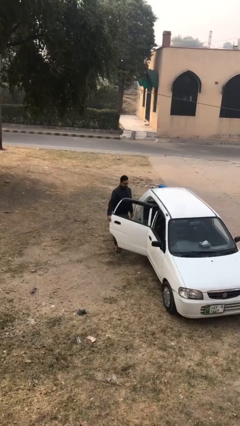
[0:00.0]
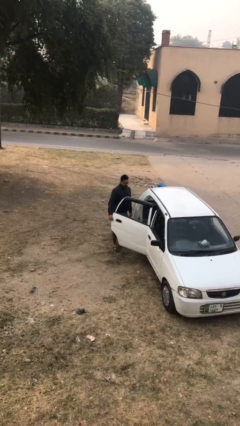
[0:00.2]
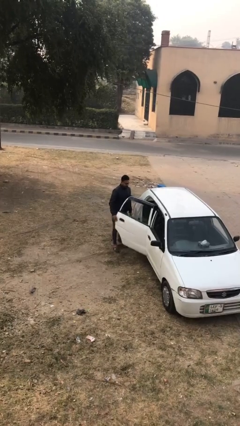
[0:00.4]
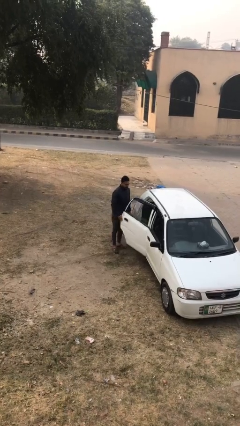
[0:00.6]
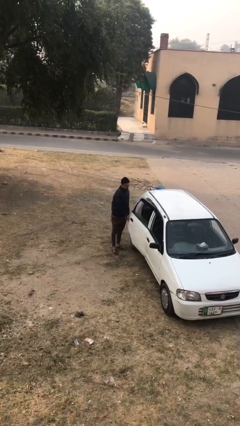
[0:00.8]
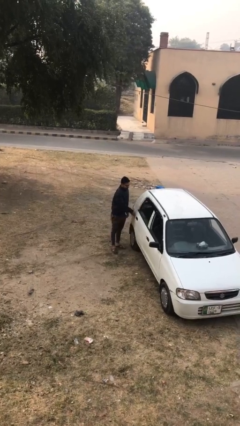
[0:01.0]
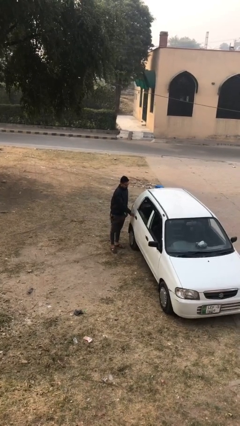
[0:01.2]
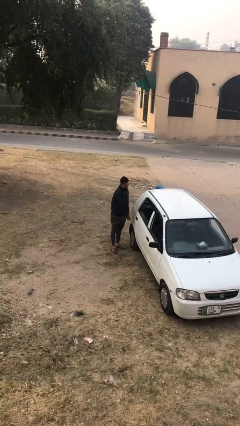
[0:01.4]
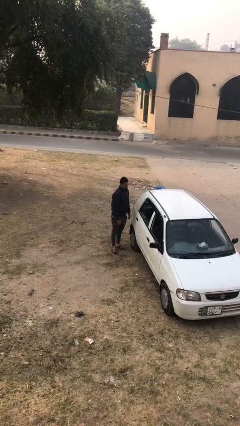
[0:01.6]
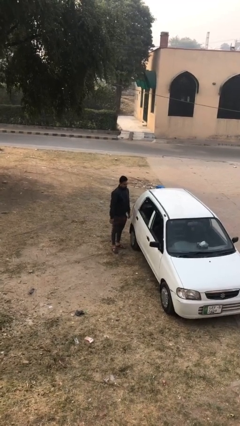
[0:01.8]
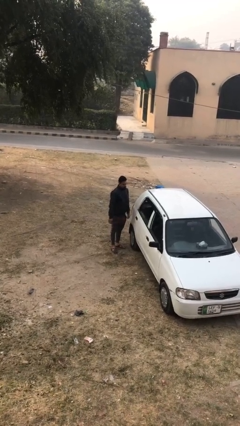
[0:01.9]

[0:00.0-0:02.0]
person closes car door

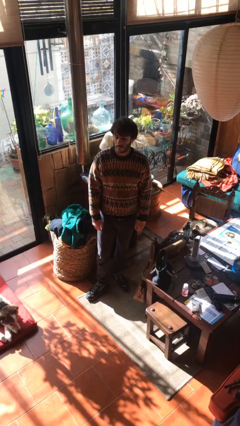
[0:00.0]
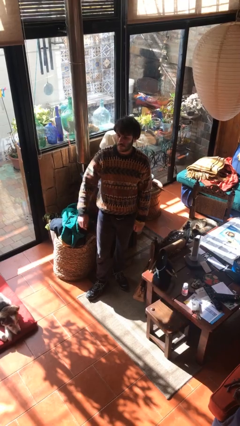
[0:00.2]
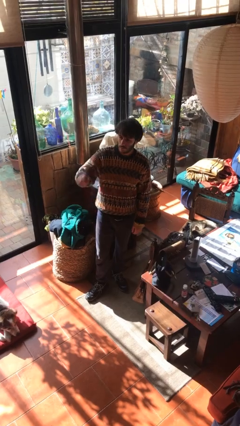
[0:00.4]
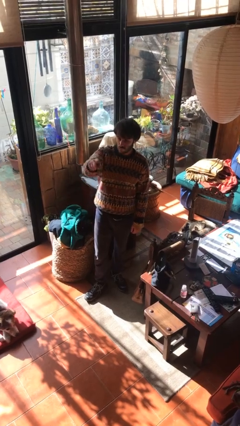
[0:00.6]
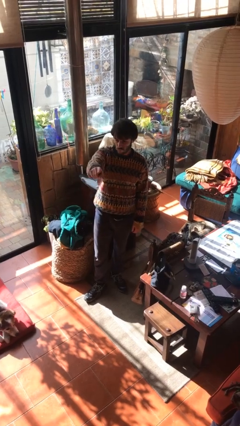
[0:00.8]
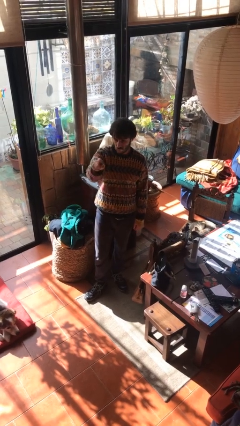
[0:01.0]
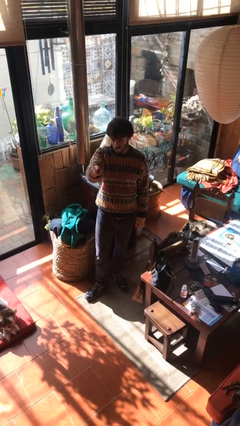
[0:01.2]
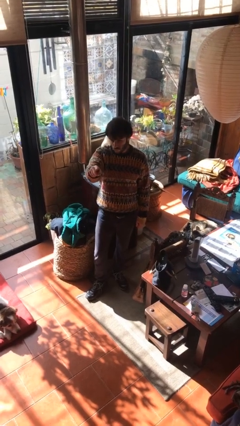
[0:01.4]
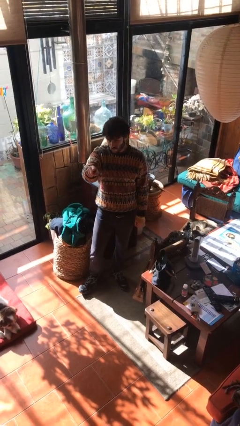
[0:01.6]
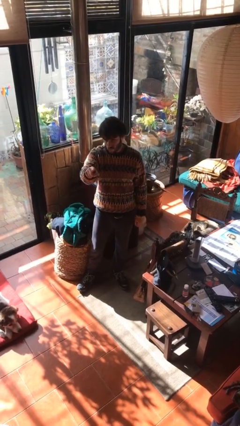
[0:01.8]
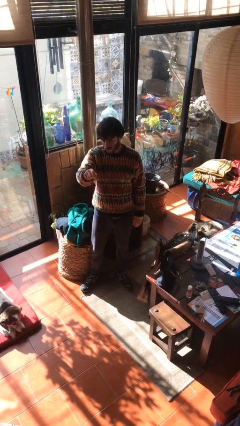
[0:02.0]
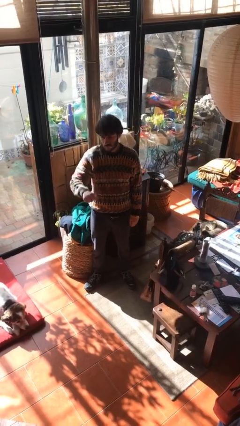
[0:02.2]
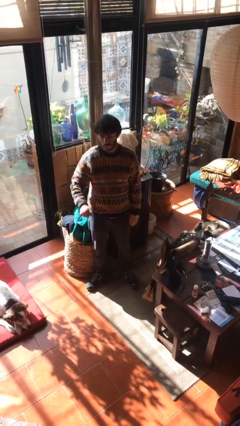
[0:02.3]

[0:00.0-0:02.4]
person points at person

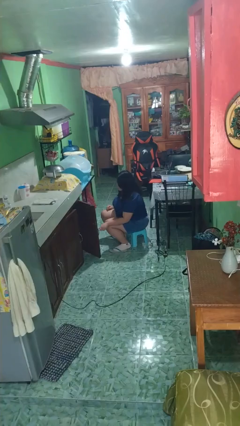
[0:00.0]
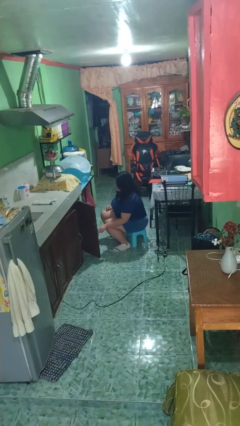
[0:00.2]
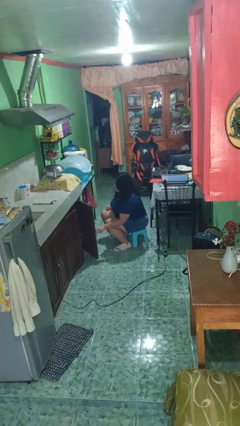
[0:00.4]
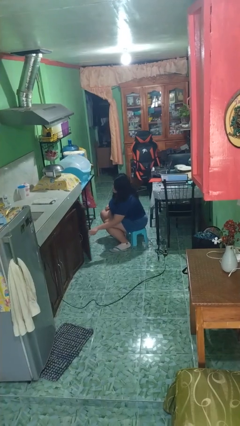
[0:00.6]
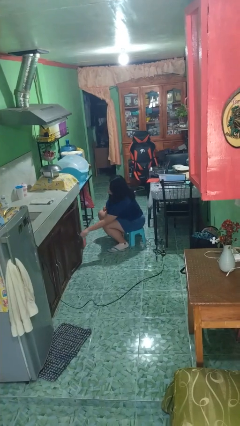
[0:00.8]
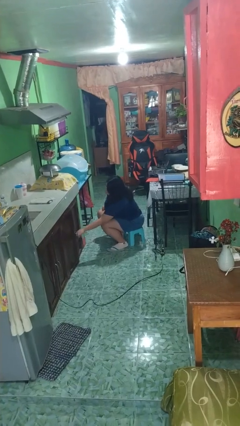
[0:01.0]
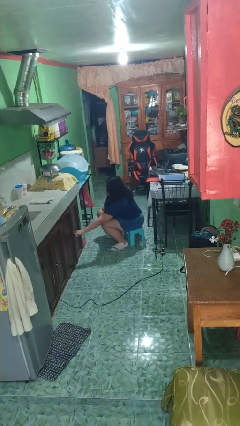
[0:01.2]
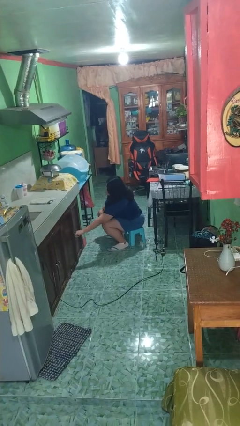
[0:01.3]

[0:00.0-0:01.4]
person closes cabinet

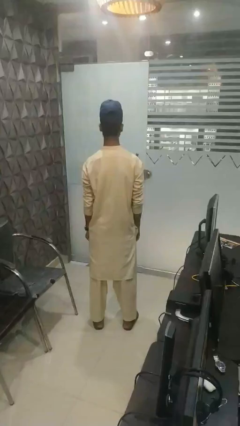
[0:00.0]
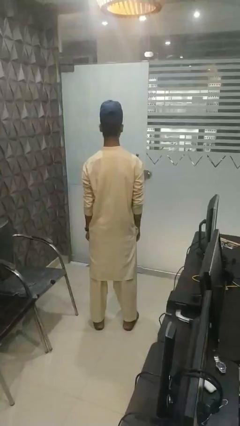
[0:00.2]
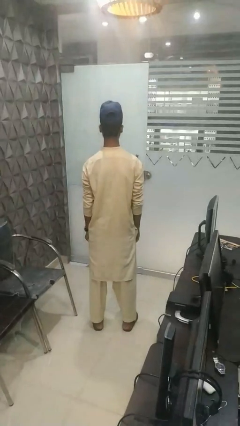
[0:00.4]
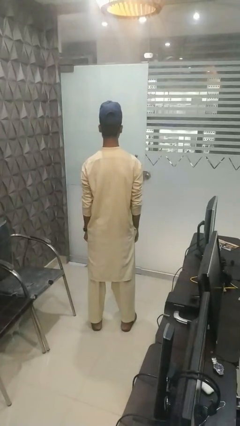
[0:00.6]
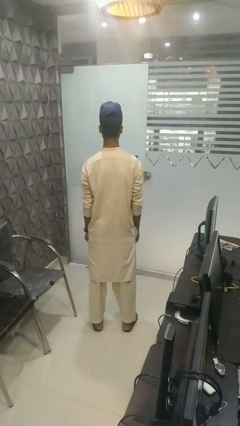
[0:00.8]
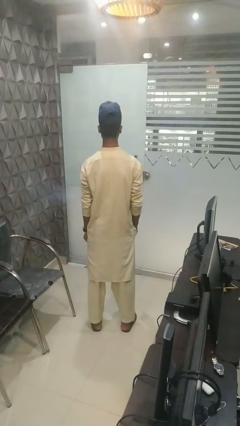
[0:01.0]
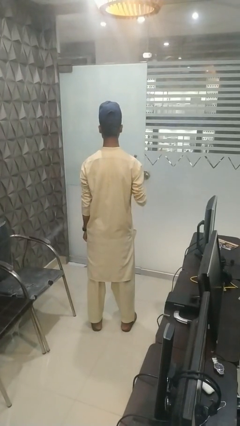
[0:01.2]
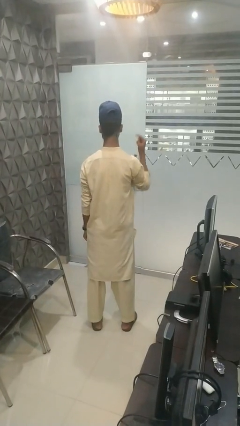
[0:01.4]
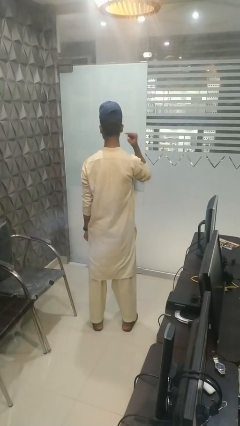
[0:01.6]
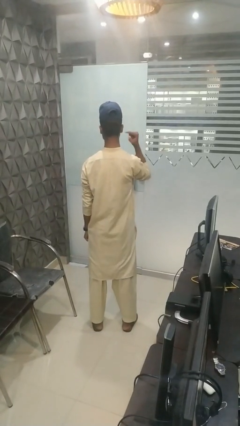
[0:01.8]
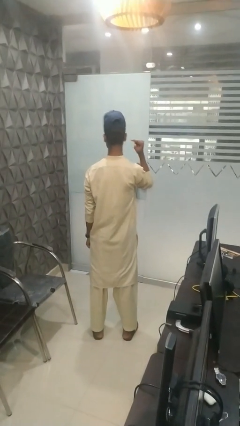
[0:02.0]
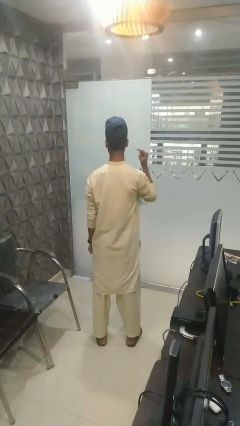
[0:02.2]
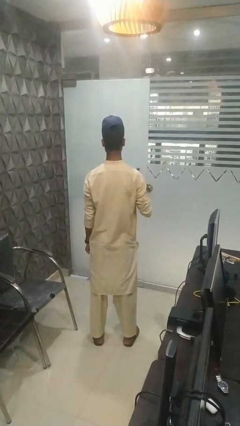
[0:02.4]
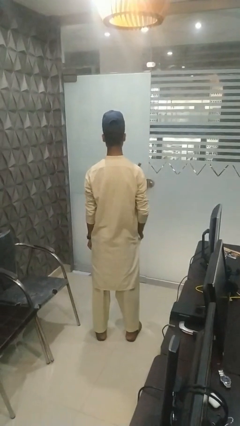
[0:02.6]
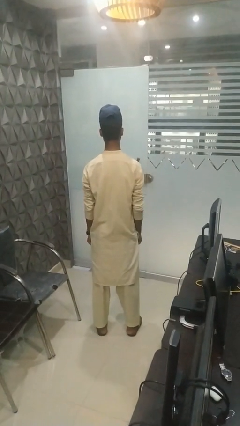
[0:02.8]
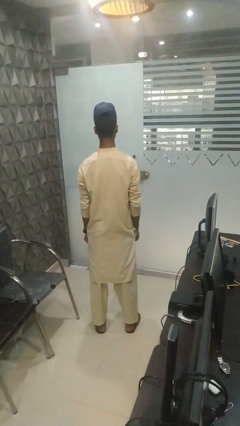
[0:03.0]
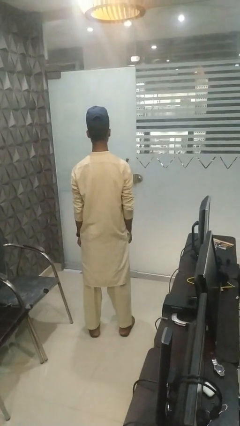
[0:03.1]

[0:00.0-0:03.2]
person gestures listen closely

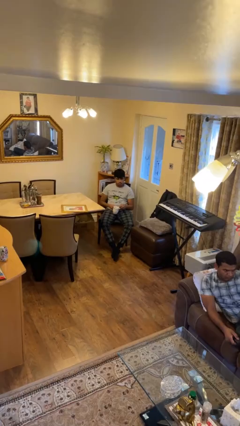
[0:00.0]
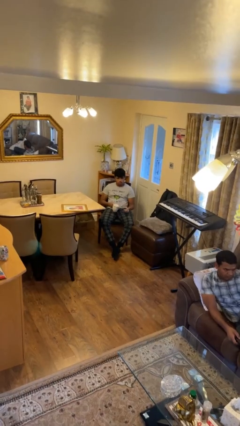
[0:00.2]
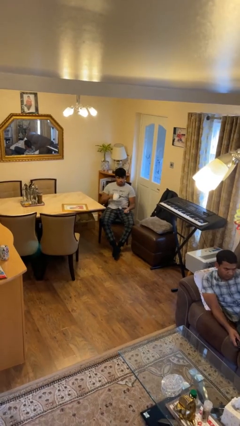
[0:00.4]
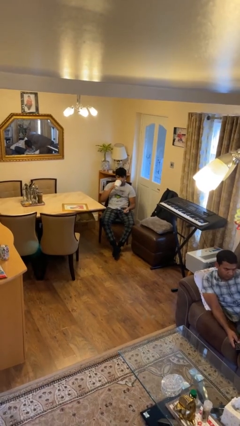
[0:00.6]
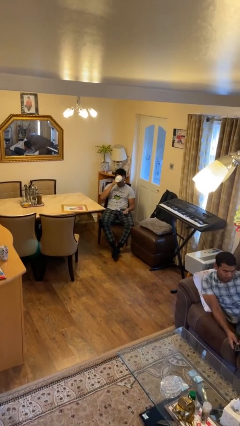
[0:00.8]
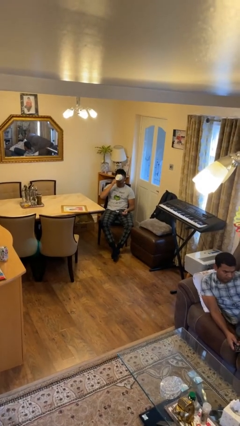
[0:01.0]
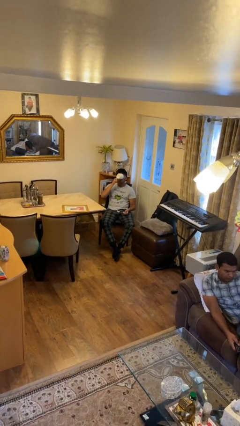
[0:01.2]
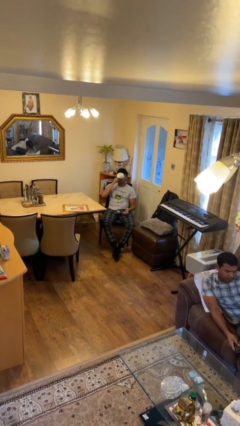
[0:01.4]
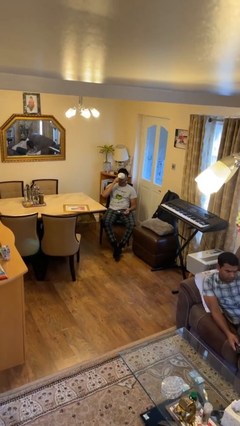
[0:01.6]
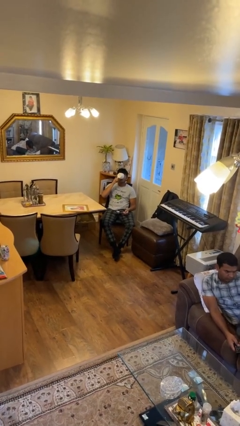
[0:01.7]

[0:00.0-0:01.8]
person drinks from mug

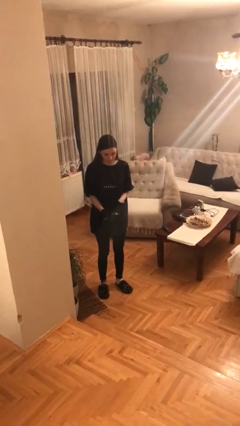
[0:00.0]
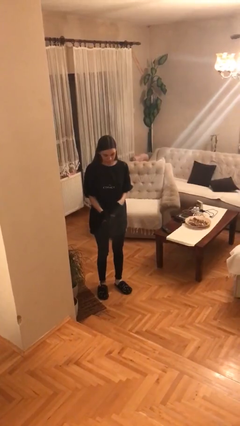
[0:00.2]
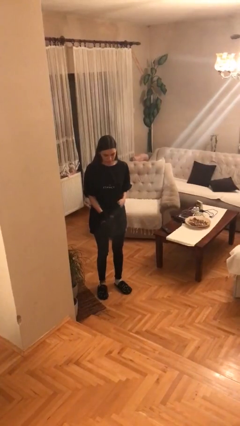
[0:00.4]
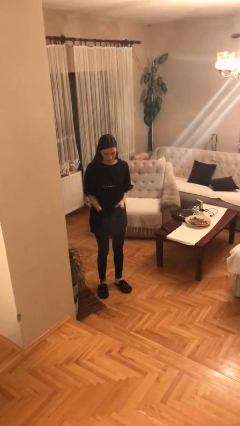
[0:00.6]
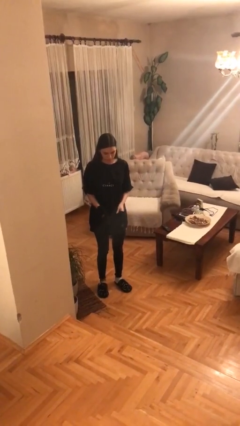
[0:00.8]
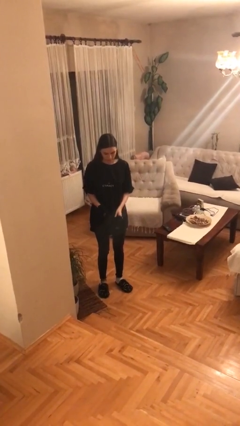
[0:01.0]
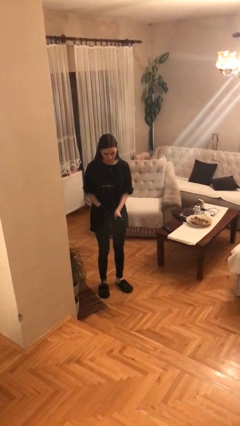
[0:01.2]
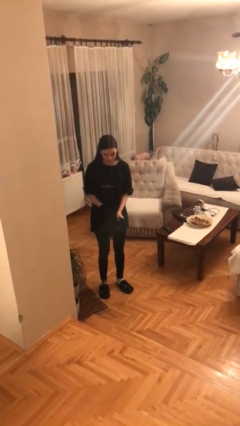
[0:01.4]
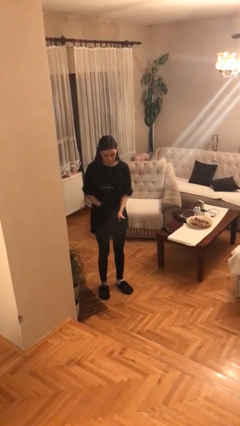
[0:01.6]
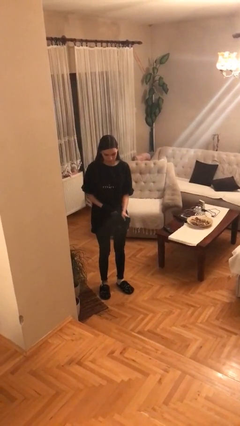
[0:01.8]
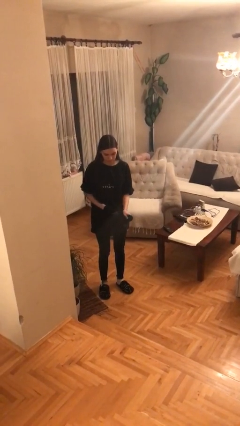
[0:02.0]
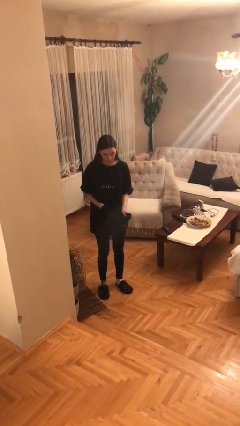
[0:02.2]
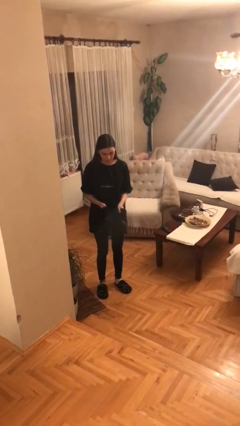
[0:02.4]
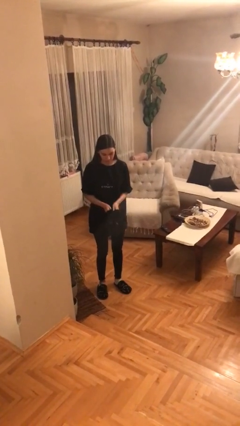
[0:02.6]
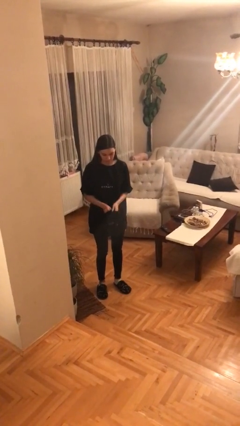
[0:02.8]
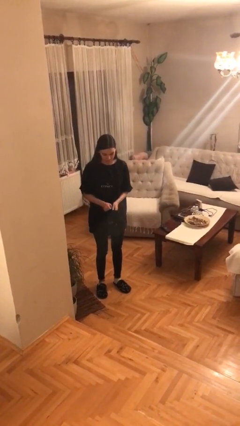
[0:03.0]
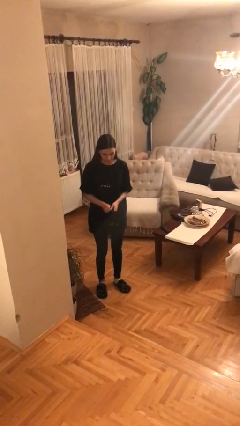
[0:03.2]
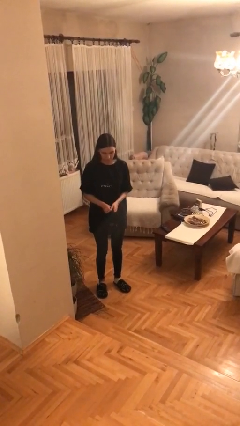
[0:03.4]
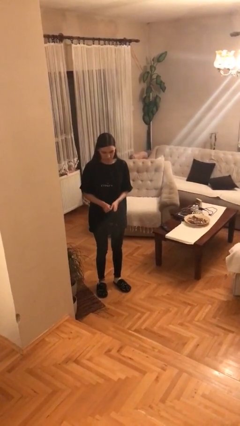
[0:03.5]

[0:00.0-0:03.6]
person takes off gloves

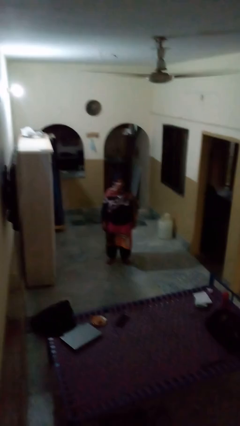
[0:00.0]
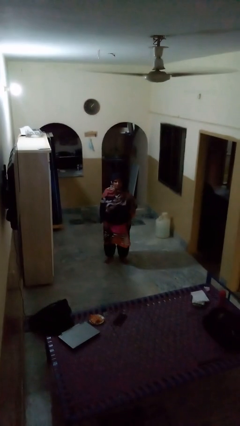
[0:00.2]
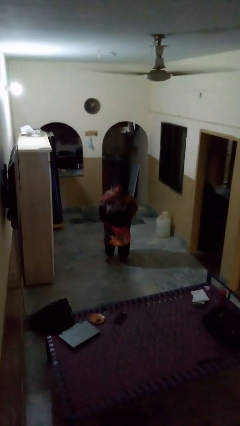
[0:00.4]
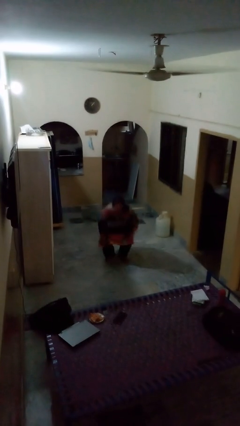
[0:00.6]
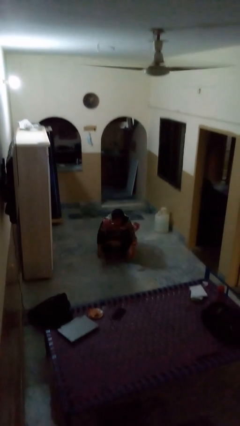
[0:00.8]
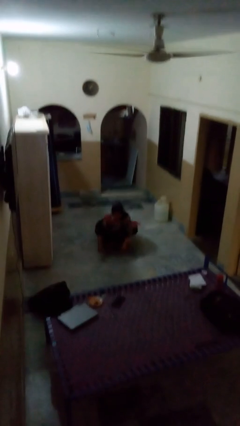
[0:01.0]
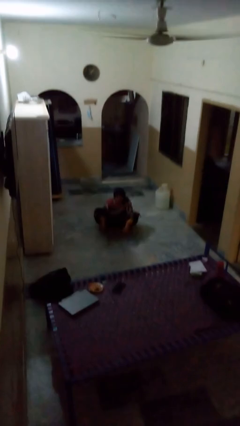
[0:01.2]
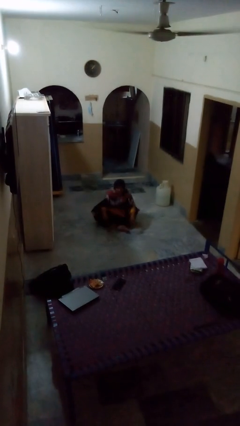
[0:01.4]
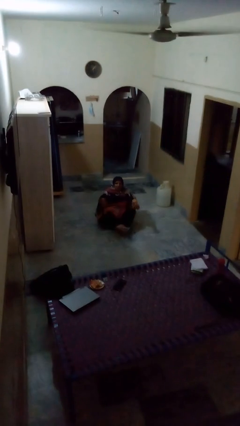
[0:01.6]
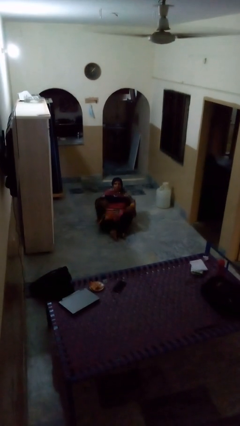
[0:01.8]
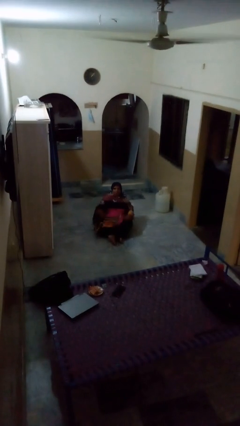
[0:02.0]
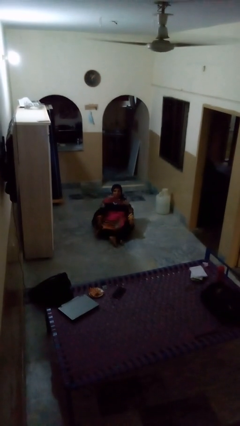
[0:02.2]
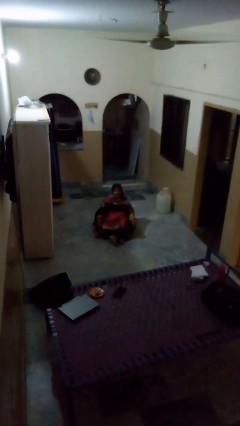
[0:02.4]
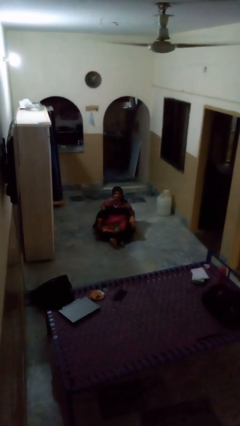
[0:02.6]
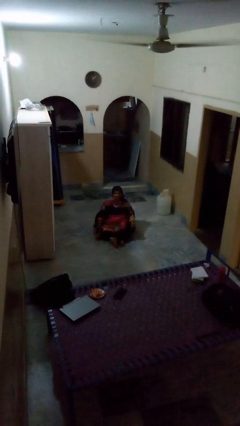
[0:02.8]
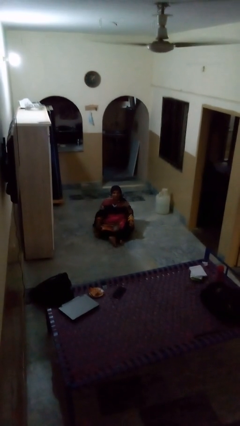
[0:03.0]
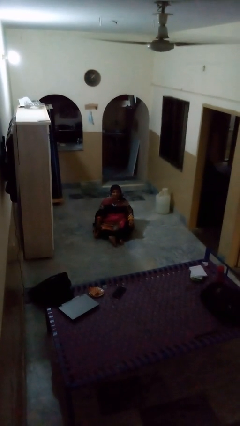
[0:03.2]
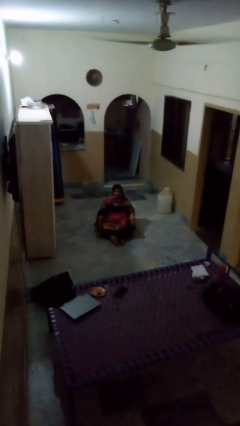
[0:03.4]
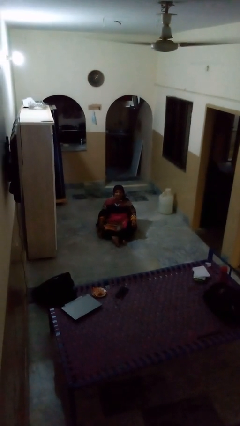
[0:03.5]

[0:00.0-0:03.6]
person sits crisscross
